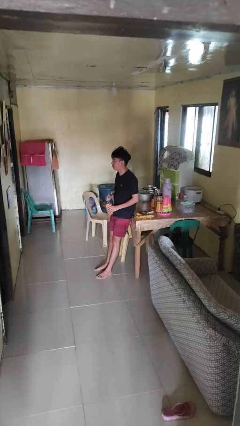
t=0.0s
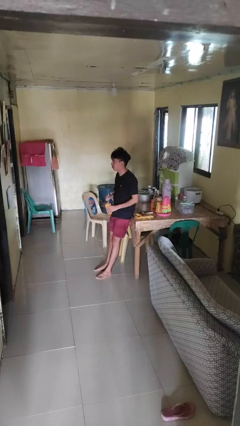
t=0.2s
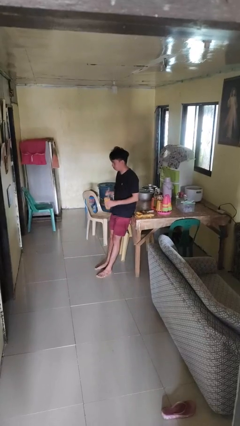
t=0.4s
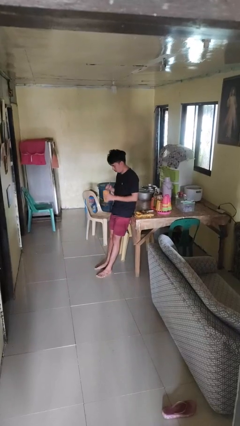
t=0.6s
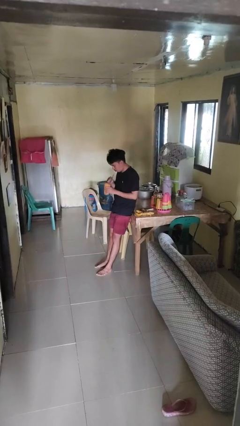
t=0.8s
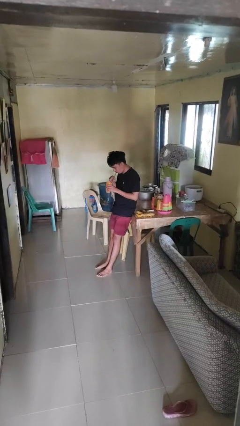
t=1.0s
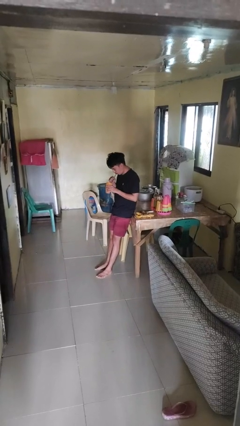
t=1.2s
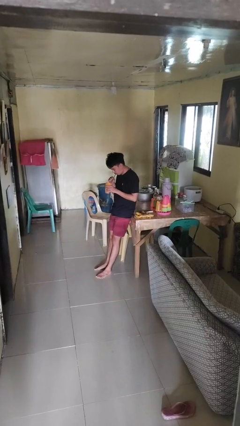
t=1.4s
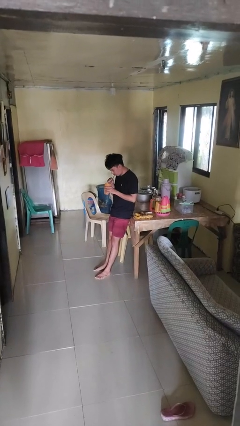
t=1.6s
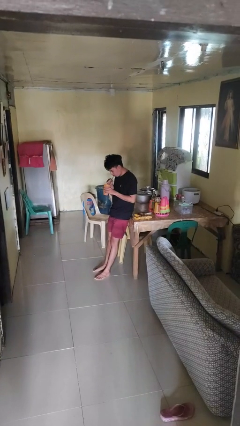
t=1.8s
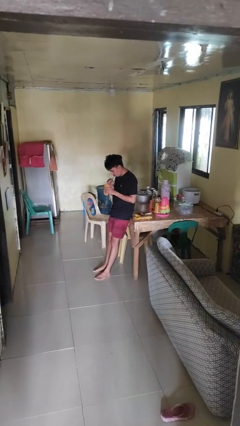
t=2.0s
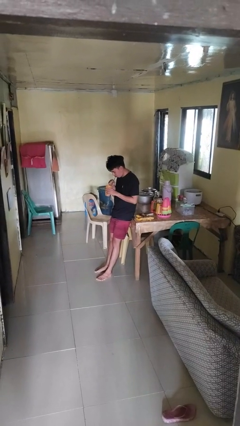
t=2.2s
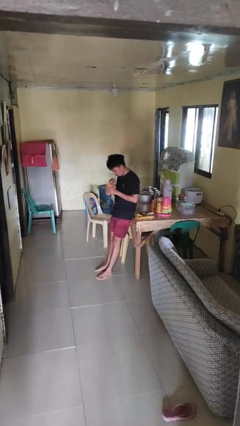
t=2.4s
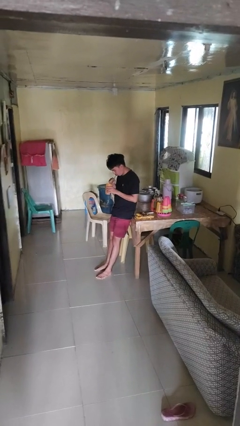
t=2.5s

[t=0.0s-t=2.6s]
person drinks from straw

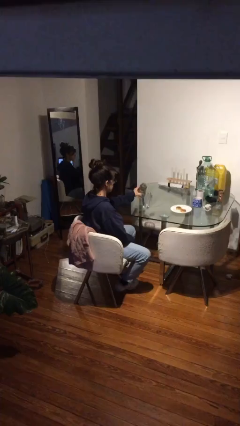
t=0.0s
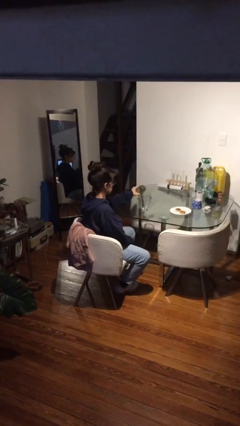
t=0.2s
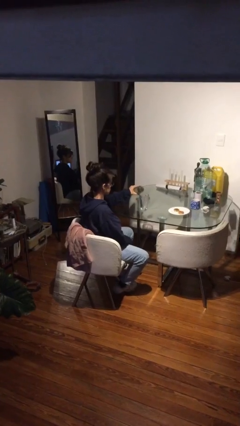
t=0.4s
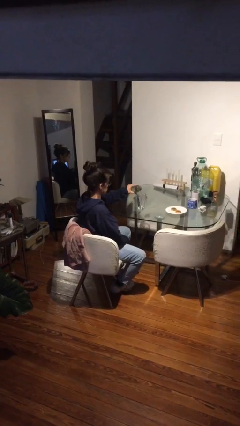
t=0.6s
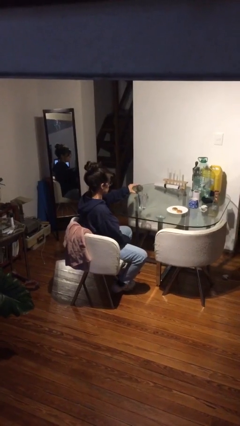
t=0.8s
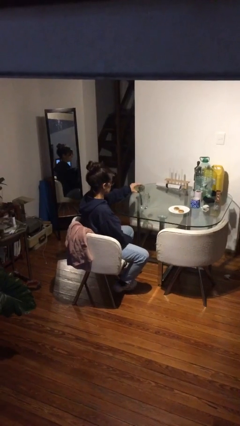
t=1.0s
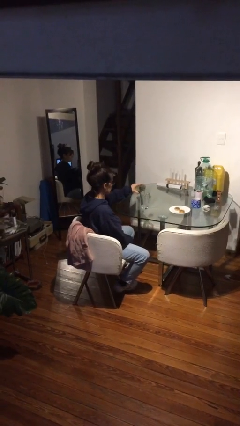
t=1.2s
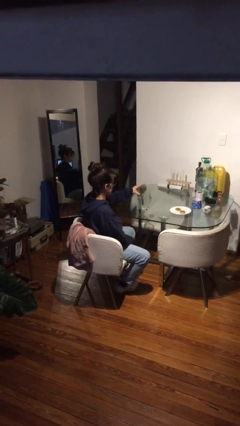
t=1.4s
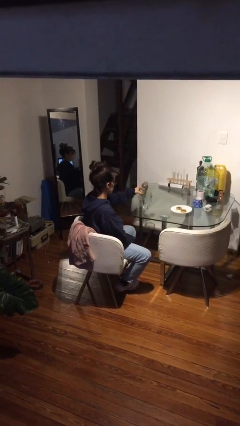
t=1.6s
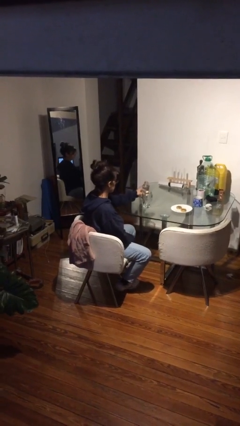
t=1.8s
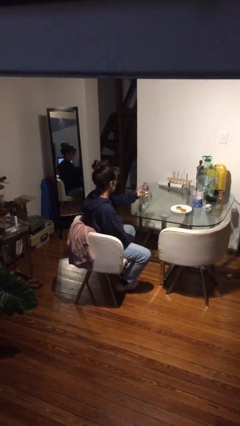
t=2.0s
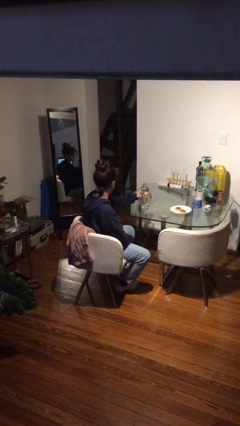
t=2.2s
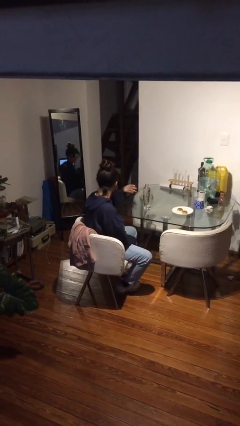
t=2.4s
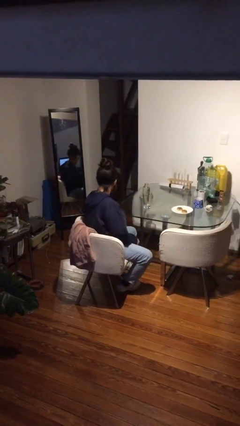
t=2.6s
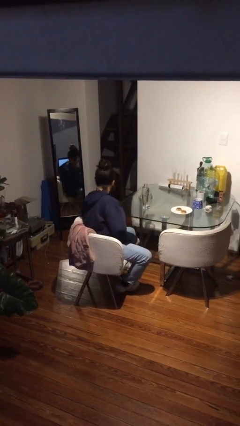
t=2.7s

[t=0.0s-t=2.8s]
person pours liquid into cup

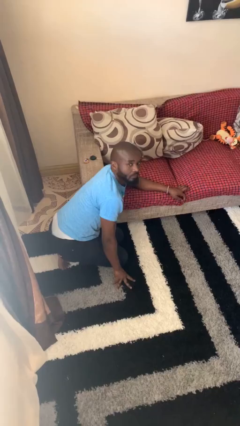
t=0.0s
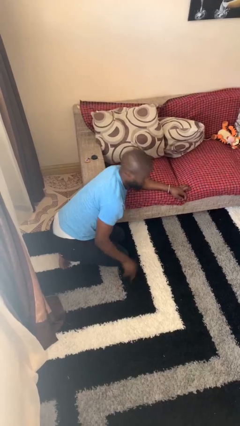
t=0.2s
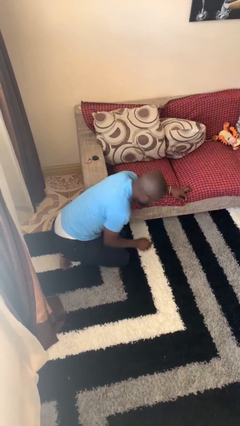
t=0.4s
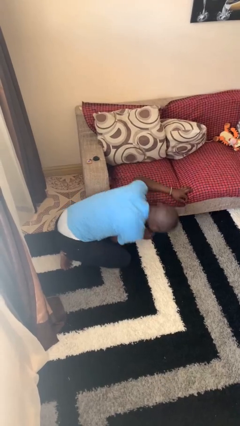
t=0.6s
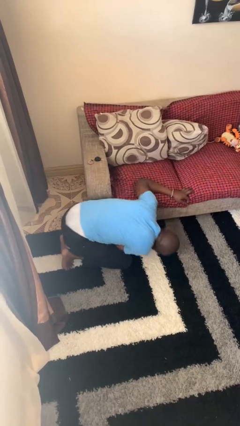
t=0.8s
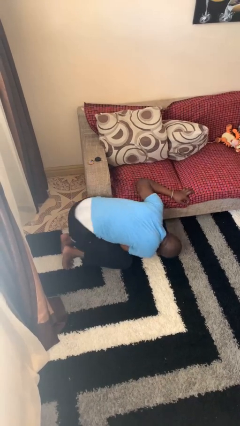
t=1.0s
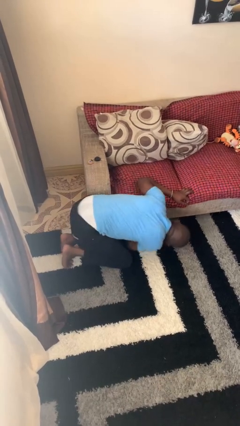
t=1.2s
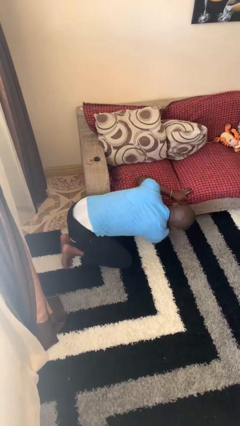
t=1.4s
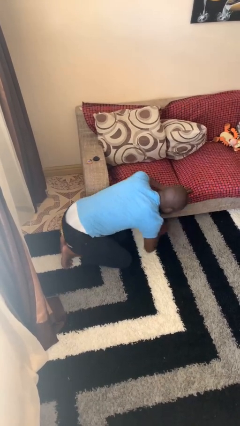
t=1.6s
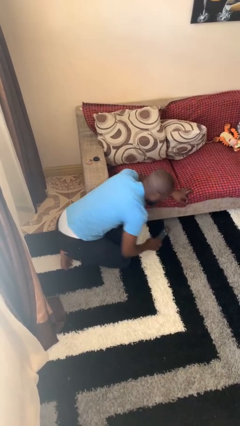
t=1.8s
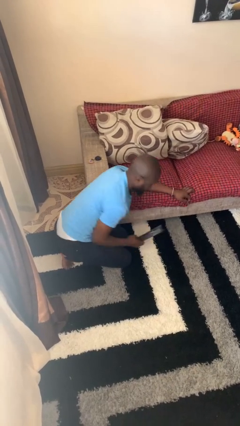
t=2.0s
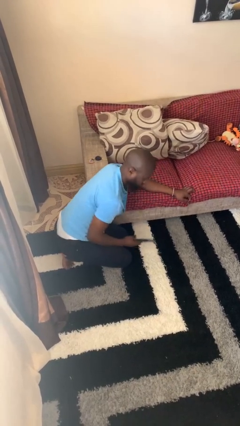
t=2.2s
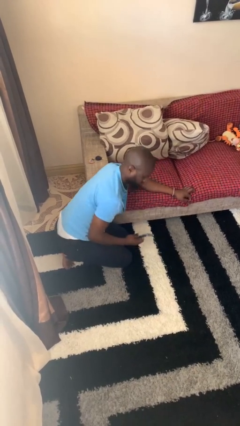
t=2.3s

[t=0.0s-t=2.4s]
person searches under couch

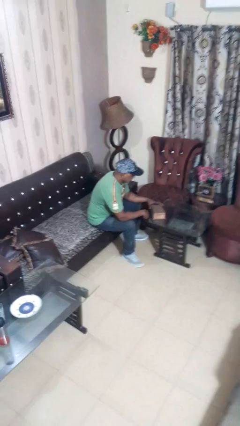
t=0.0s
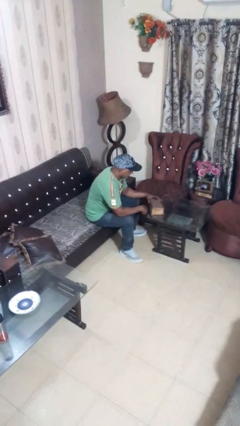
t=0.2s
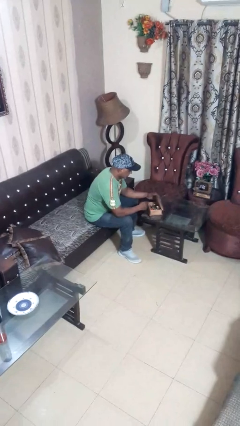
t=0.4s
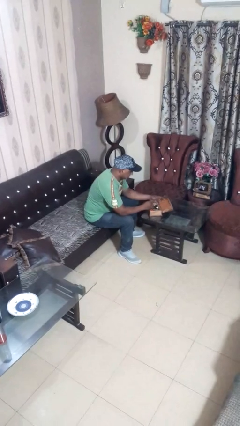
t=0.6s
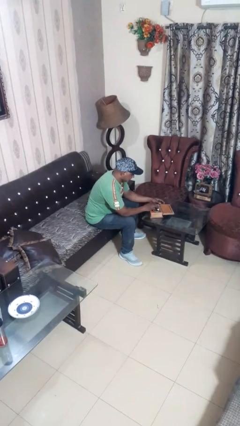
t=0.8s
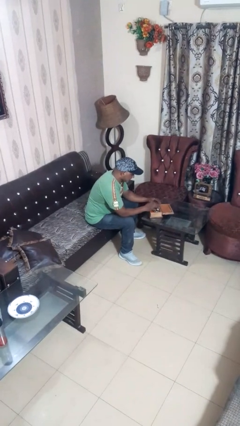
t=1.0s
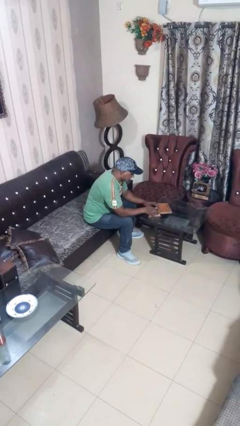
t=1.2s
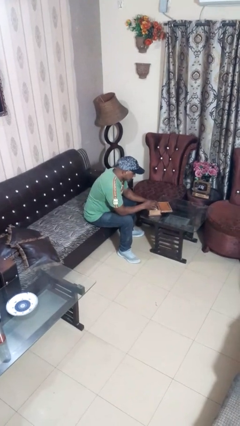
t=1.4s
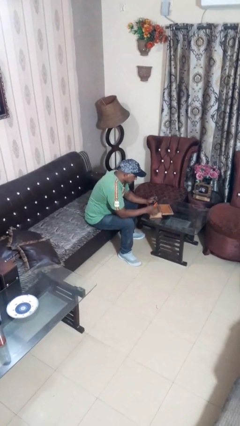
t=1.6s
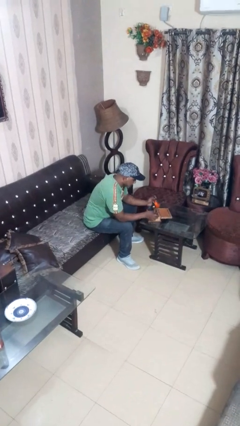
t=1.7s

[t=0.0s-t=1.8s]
person opens jewelry box

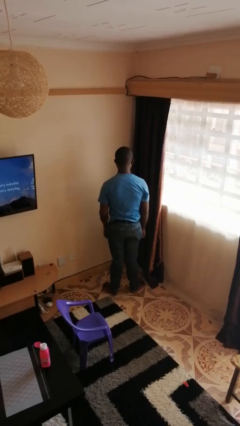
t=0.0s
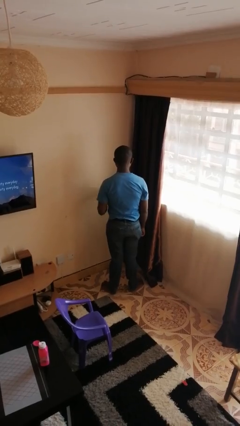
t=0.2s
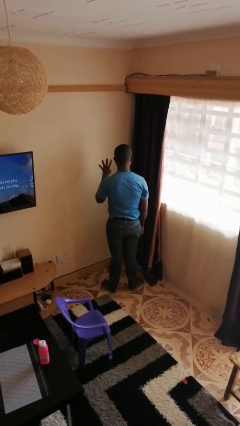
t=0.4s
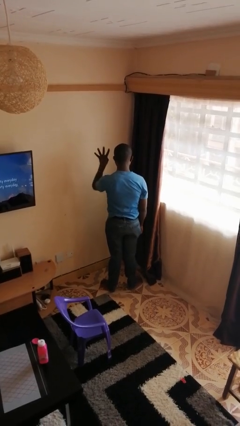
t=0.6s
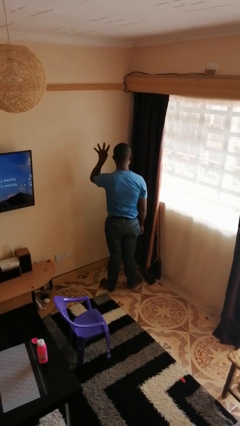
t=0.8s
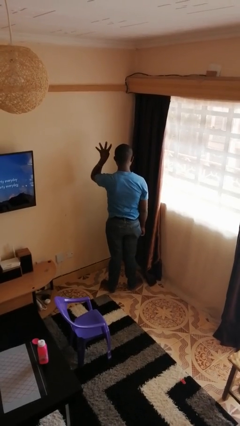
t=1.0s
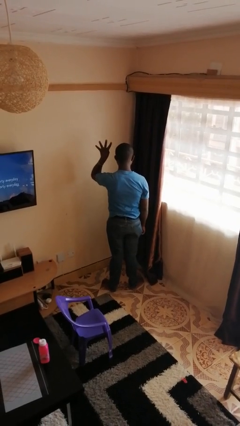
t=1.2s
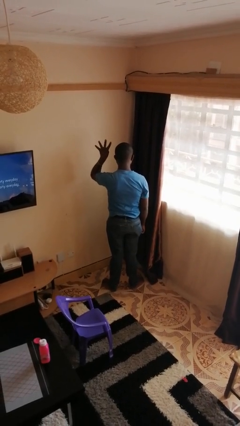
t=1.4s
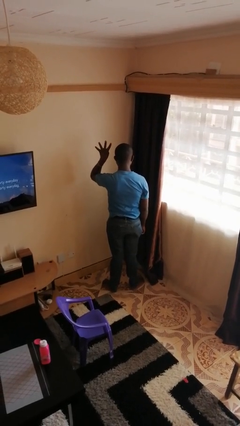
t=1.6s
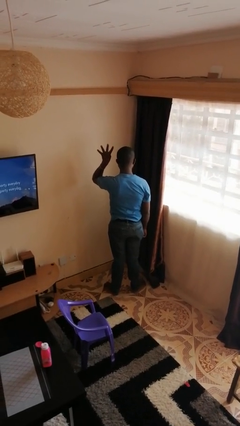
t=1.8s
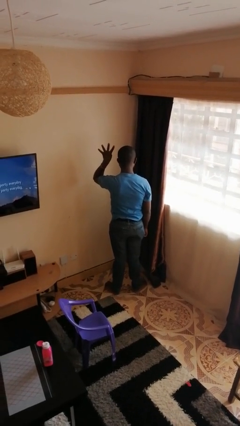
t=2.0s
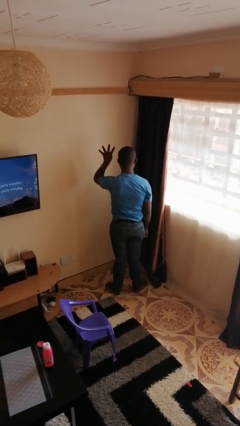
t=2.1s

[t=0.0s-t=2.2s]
person gestures number four

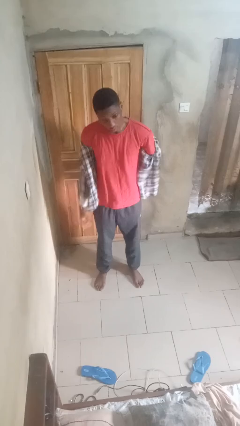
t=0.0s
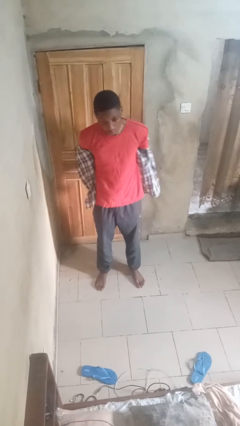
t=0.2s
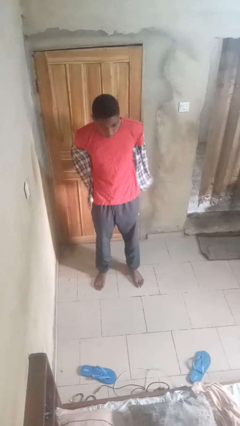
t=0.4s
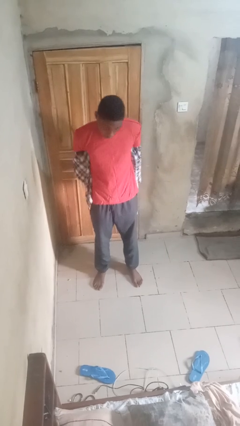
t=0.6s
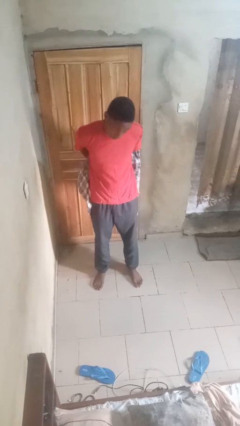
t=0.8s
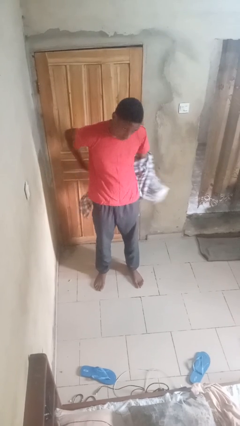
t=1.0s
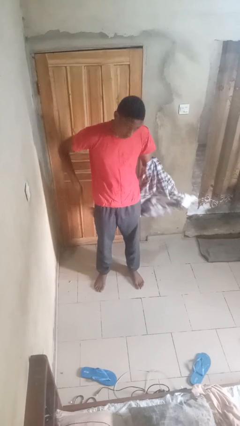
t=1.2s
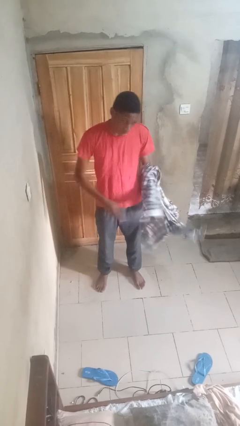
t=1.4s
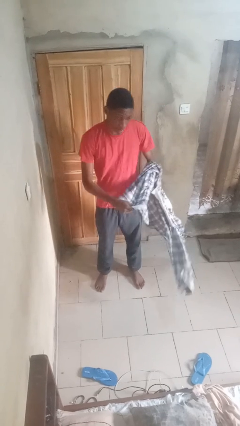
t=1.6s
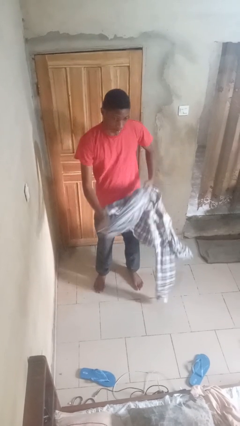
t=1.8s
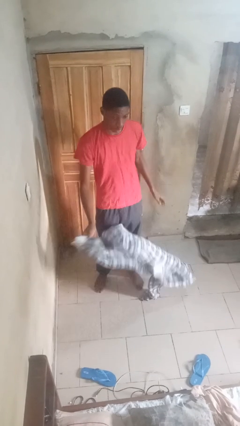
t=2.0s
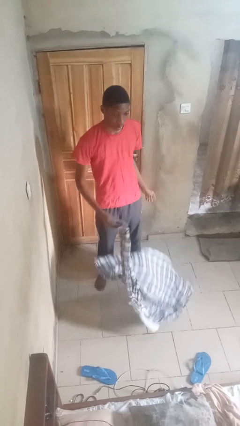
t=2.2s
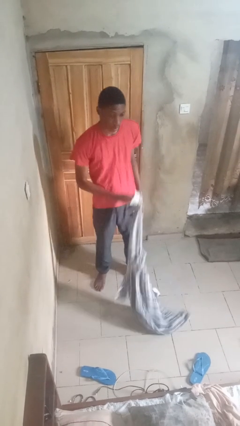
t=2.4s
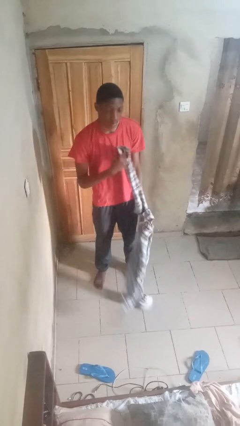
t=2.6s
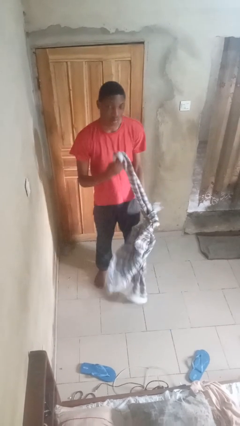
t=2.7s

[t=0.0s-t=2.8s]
person takes off shirt

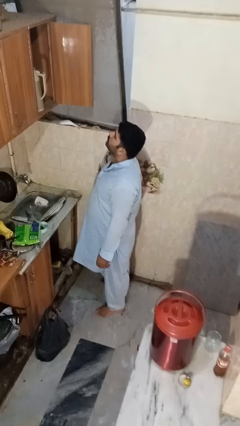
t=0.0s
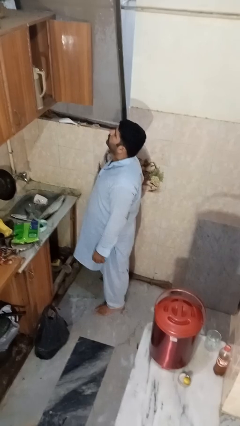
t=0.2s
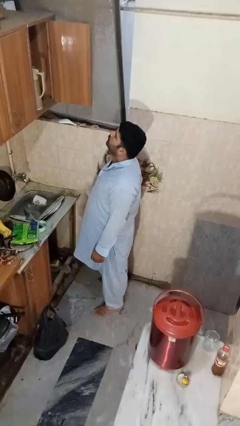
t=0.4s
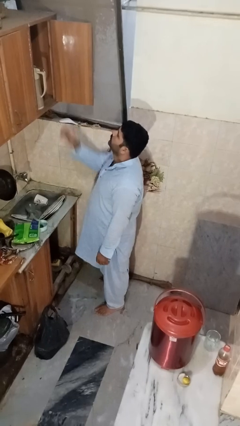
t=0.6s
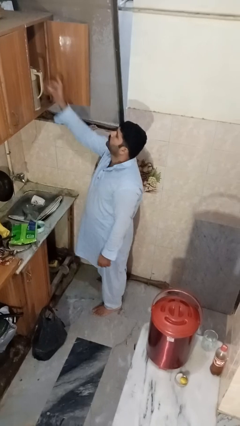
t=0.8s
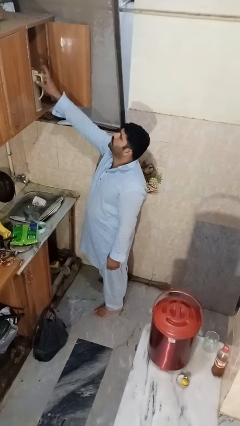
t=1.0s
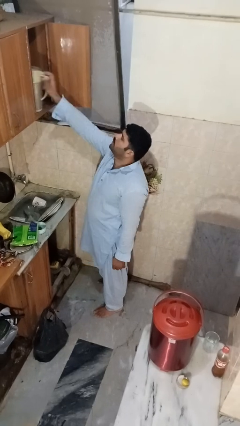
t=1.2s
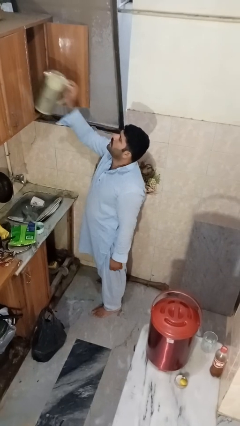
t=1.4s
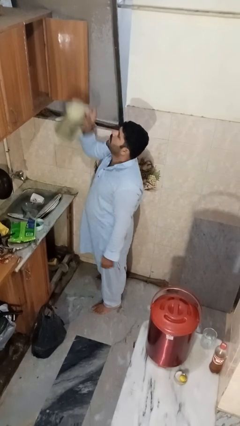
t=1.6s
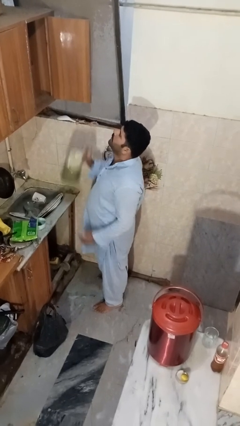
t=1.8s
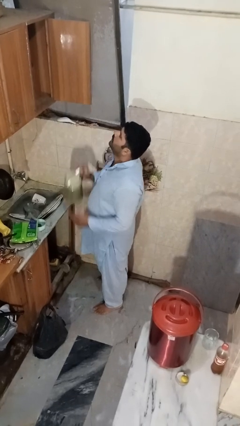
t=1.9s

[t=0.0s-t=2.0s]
person takes object from cabinet
